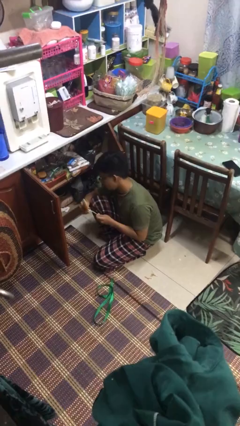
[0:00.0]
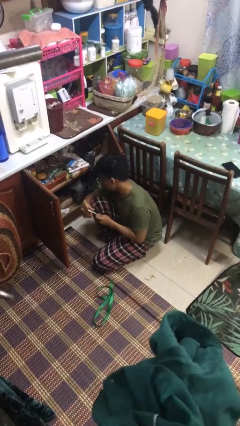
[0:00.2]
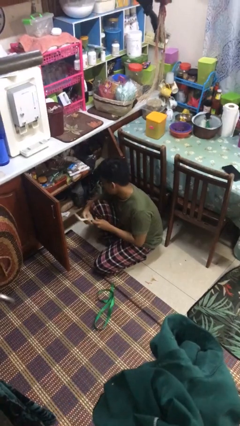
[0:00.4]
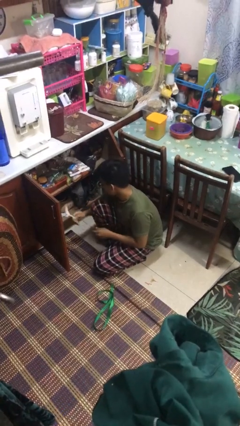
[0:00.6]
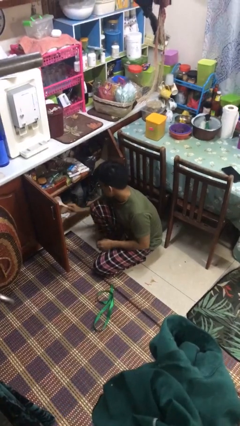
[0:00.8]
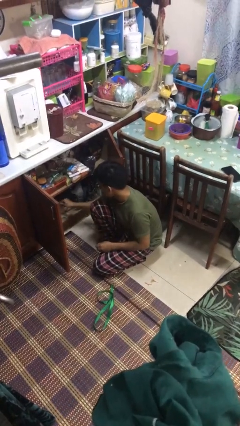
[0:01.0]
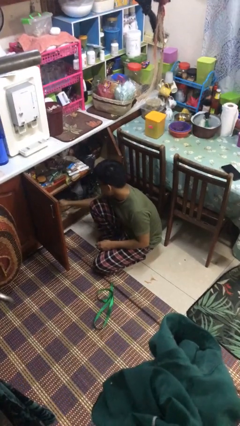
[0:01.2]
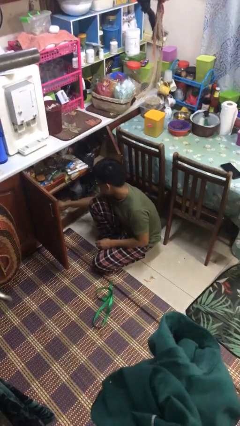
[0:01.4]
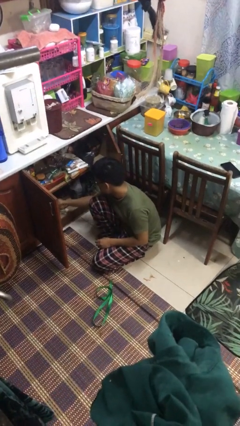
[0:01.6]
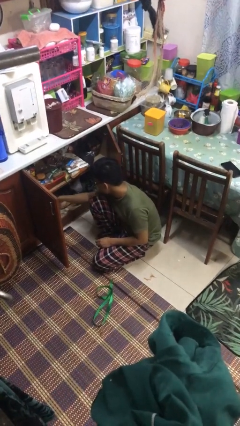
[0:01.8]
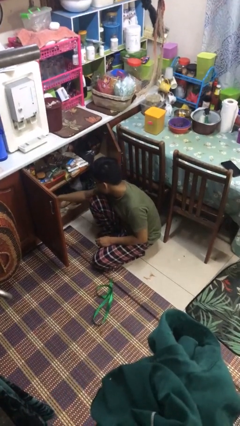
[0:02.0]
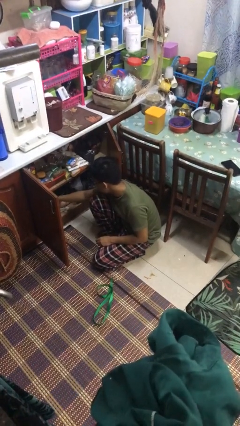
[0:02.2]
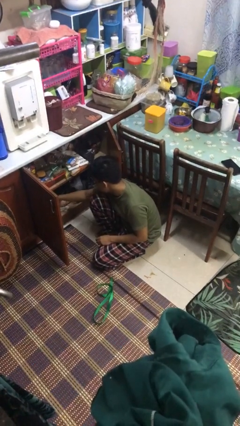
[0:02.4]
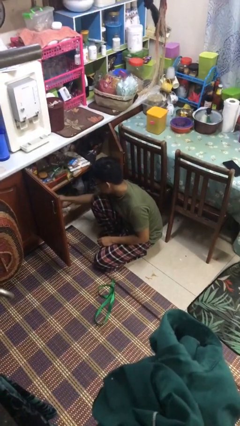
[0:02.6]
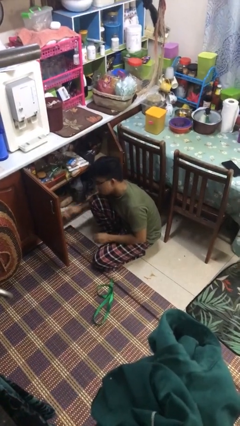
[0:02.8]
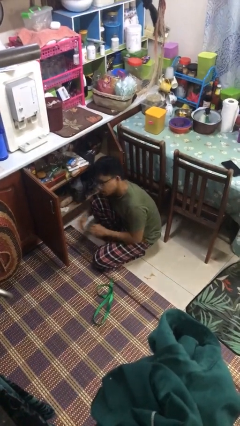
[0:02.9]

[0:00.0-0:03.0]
person puts object into kitchen drawer

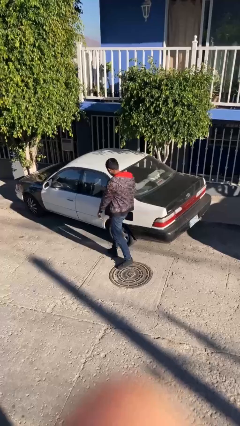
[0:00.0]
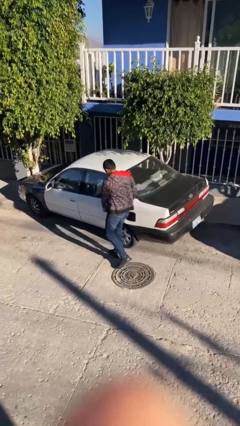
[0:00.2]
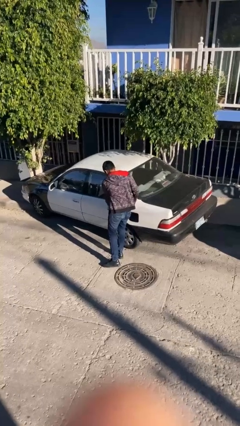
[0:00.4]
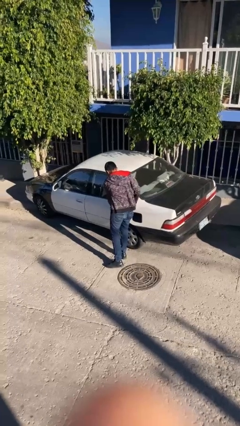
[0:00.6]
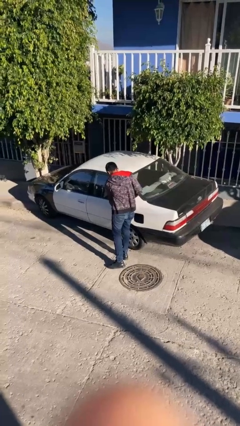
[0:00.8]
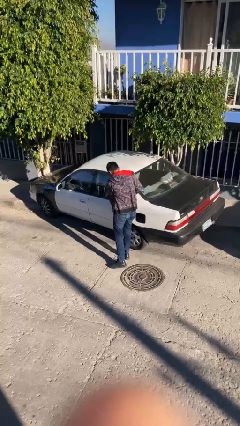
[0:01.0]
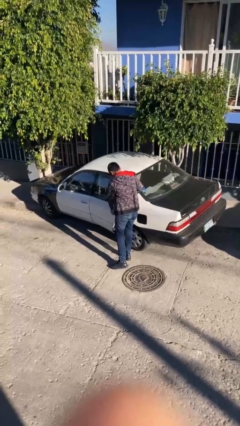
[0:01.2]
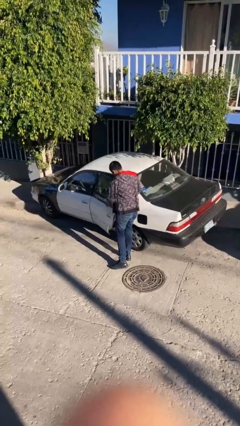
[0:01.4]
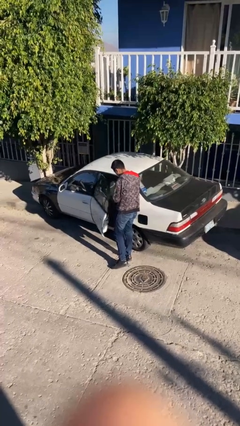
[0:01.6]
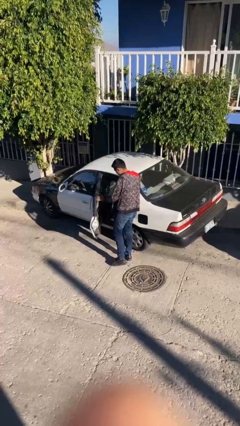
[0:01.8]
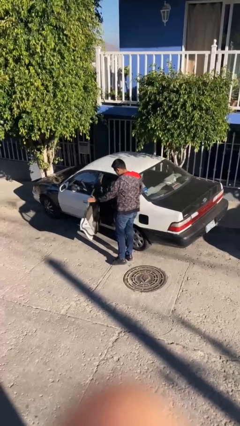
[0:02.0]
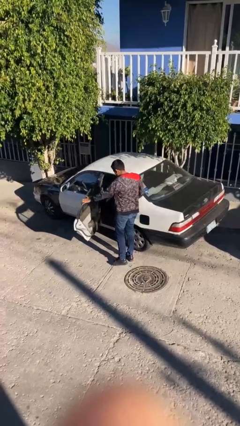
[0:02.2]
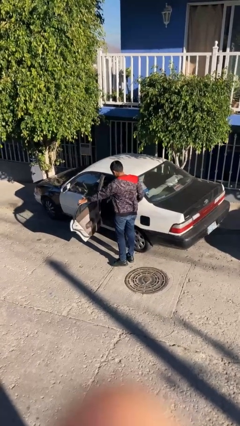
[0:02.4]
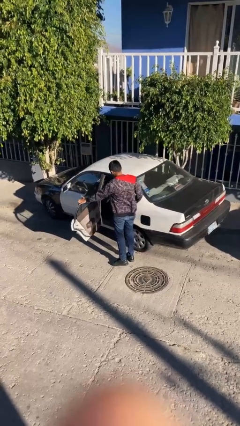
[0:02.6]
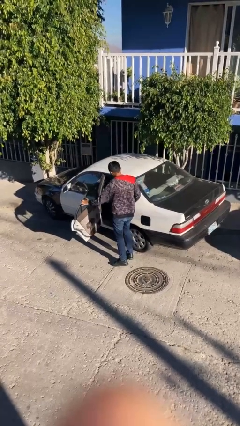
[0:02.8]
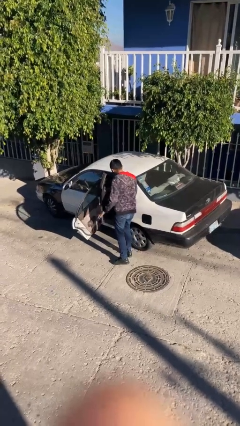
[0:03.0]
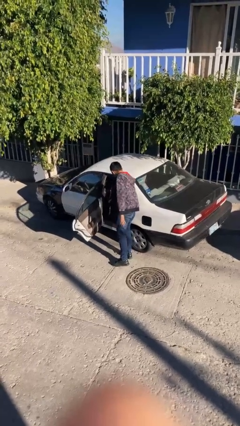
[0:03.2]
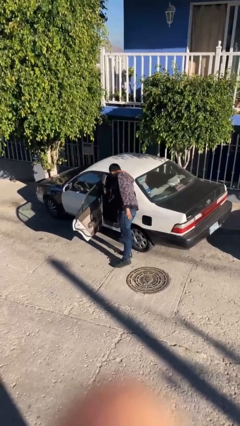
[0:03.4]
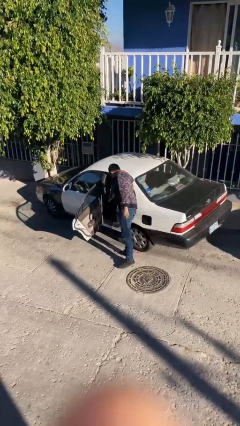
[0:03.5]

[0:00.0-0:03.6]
person opens car door

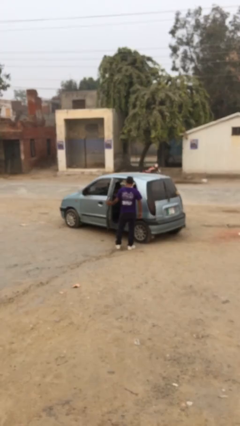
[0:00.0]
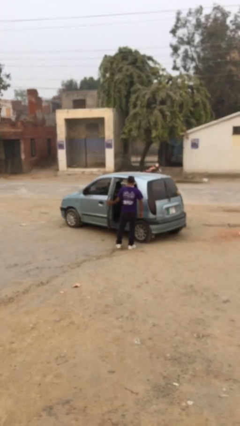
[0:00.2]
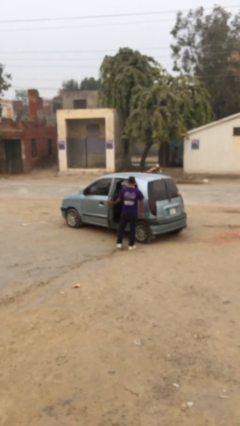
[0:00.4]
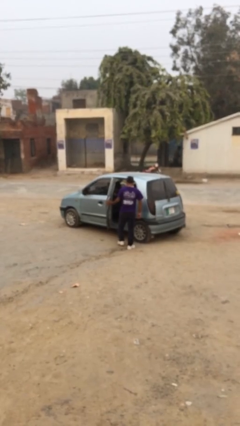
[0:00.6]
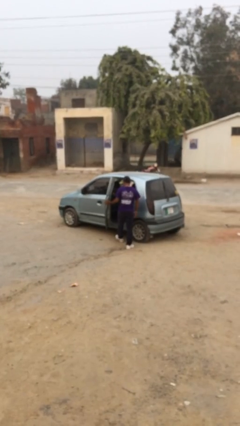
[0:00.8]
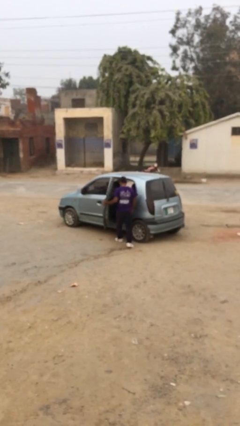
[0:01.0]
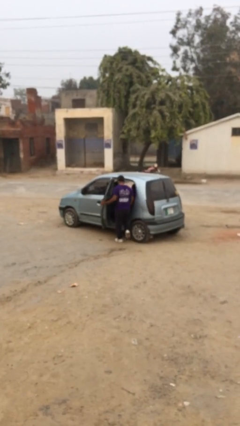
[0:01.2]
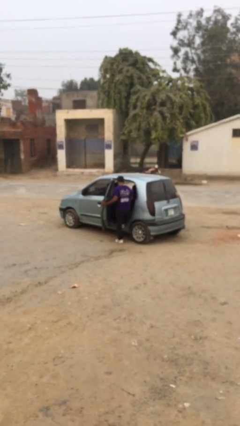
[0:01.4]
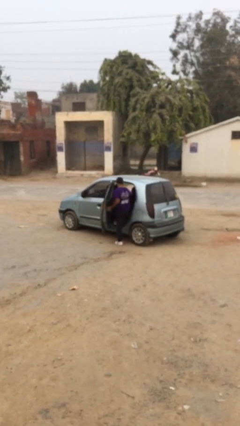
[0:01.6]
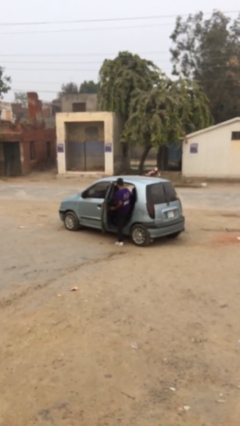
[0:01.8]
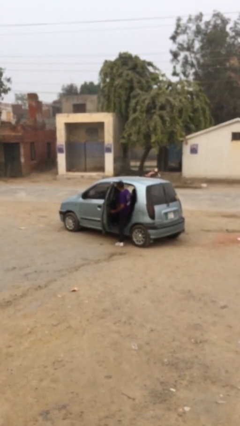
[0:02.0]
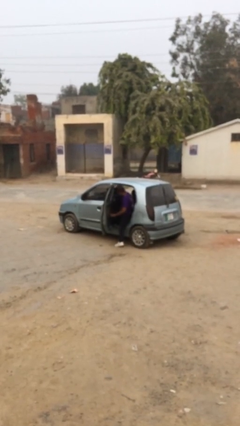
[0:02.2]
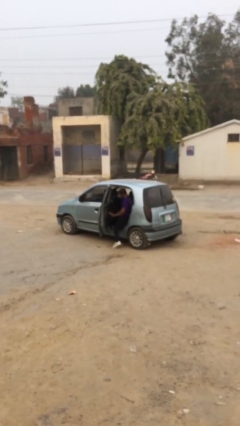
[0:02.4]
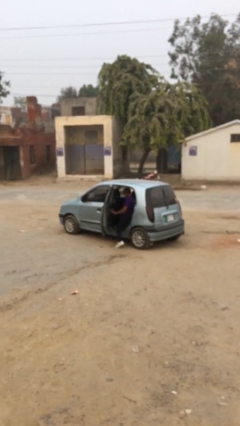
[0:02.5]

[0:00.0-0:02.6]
person enters car

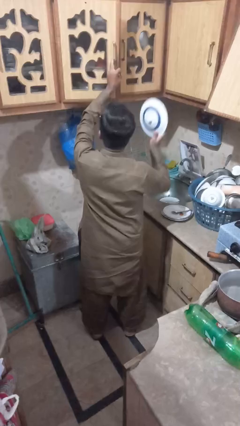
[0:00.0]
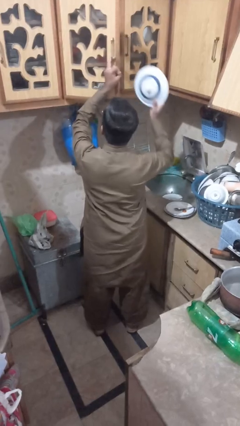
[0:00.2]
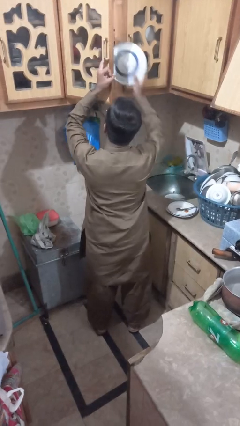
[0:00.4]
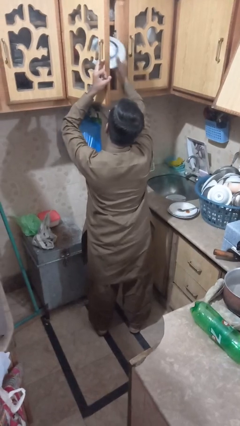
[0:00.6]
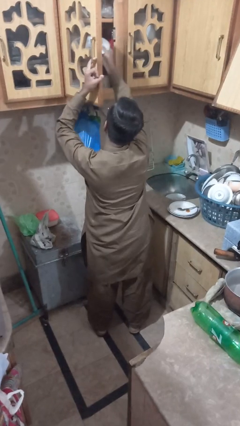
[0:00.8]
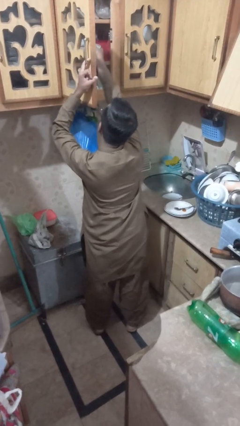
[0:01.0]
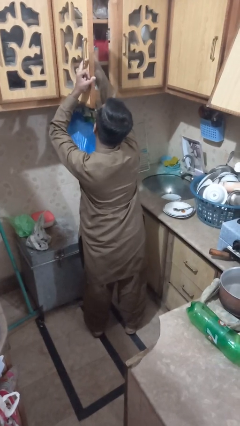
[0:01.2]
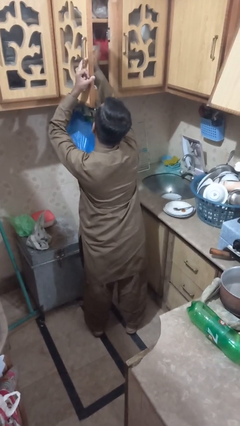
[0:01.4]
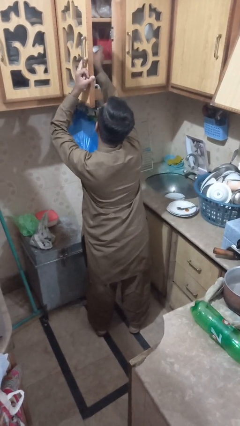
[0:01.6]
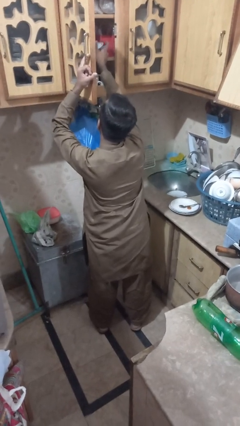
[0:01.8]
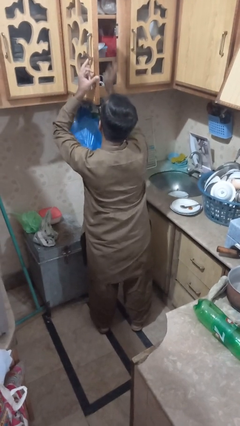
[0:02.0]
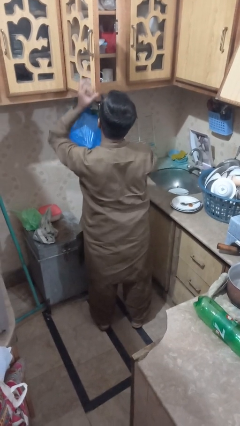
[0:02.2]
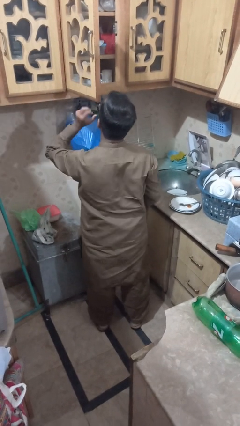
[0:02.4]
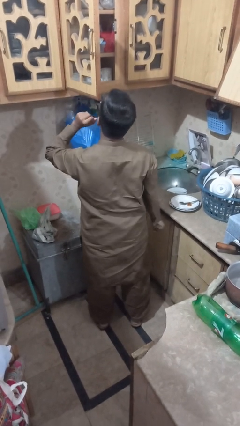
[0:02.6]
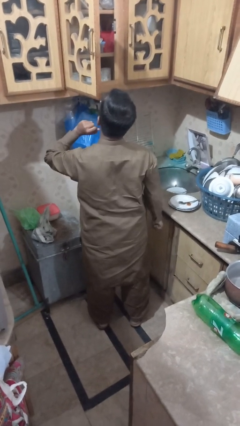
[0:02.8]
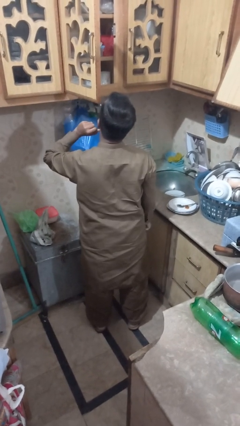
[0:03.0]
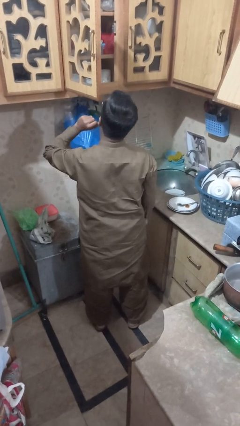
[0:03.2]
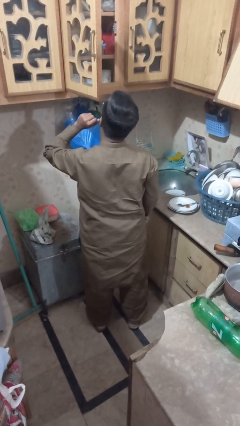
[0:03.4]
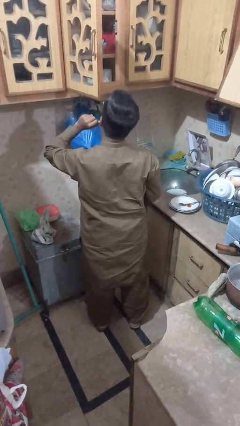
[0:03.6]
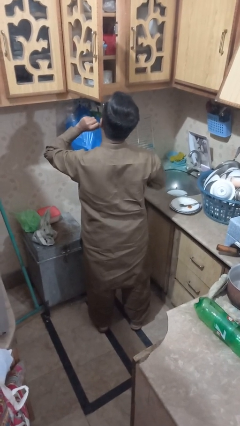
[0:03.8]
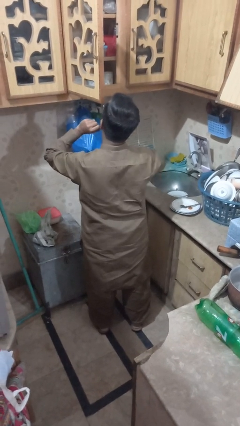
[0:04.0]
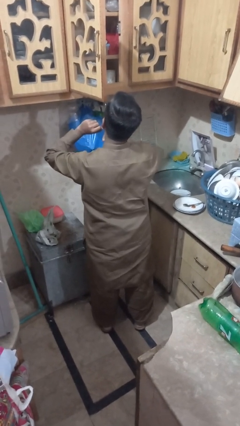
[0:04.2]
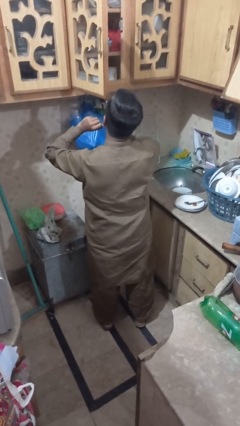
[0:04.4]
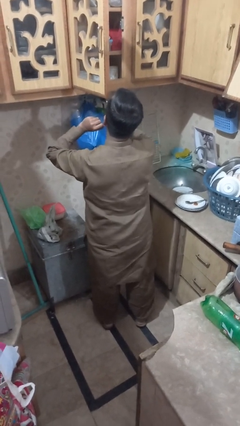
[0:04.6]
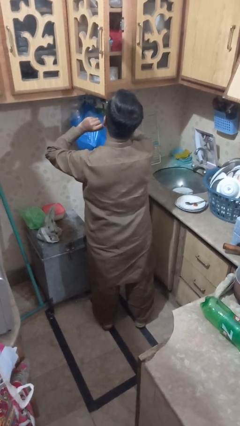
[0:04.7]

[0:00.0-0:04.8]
person puts object in cabinet

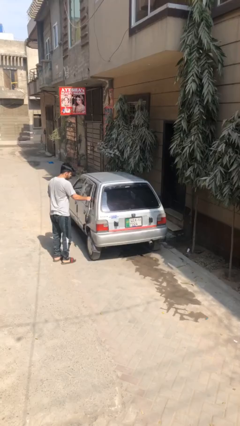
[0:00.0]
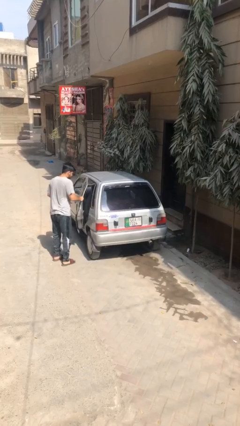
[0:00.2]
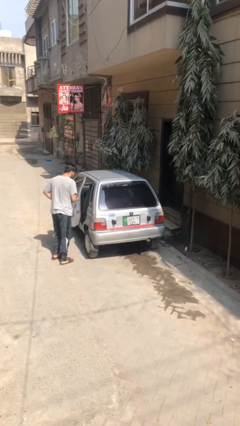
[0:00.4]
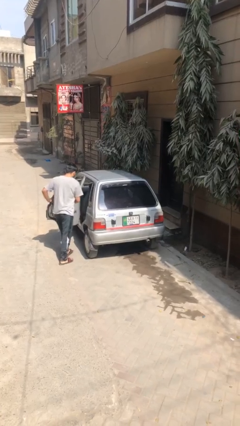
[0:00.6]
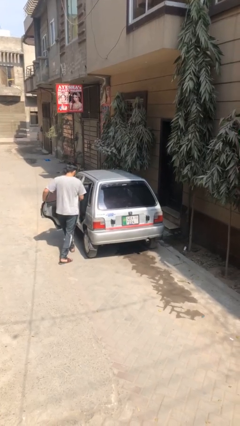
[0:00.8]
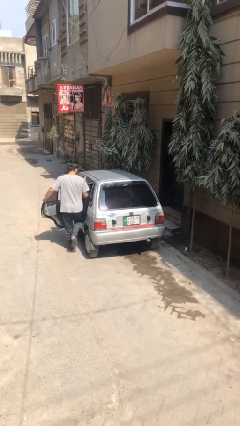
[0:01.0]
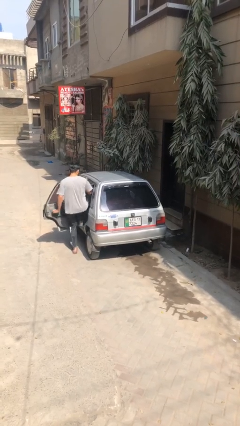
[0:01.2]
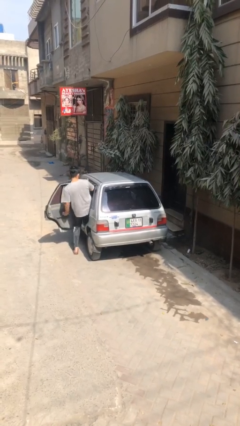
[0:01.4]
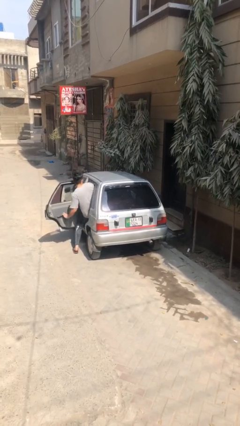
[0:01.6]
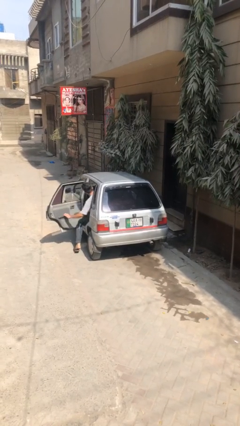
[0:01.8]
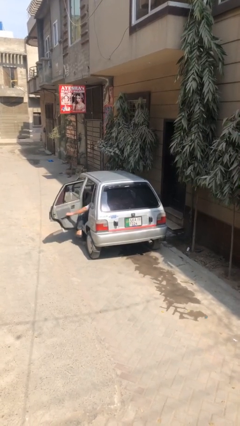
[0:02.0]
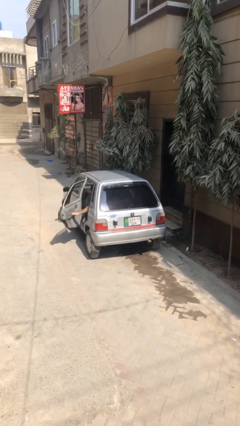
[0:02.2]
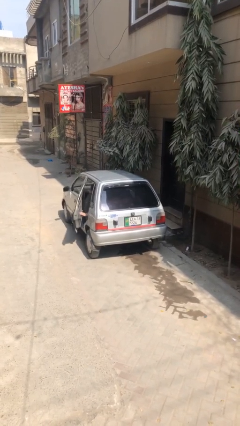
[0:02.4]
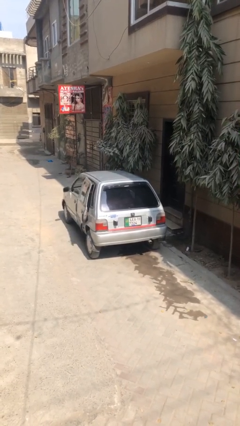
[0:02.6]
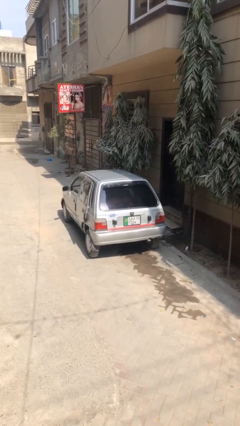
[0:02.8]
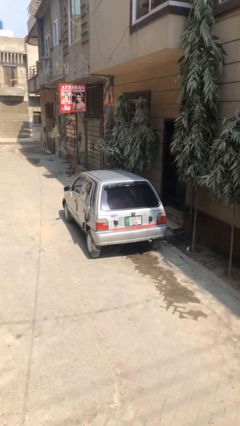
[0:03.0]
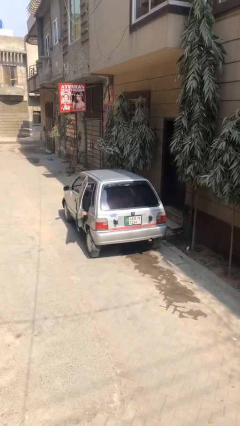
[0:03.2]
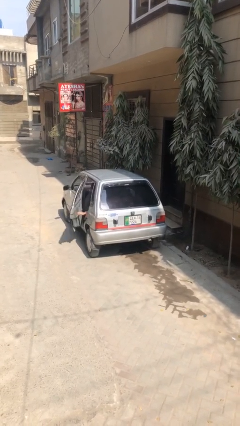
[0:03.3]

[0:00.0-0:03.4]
car picks up person
